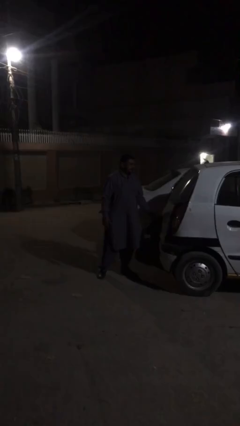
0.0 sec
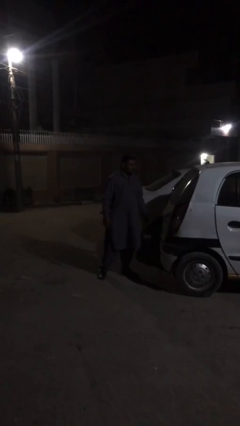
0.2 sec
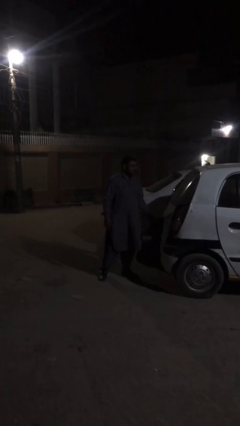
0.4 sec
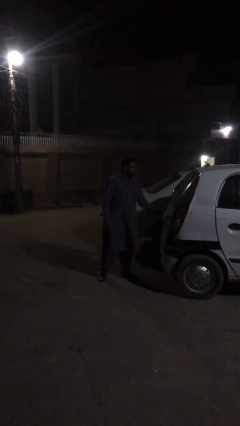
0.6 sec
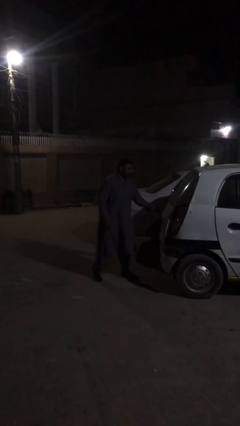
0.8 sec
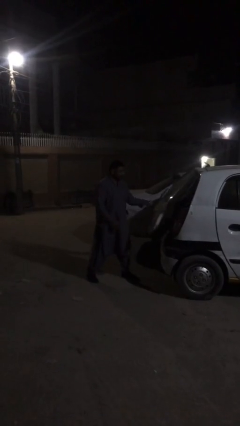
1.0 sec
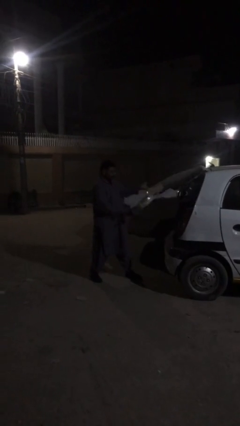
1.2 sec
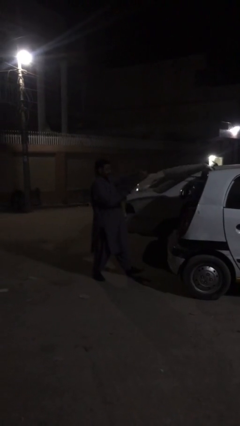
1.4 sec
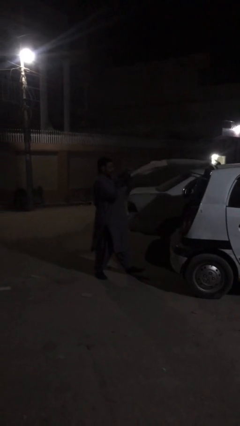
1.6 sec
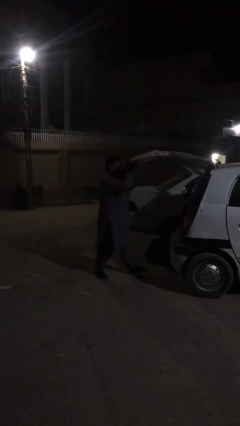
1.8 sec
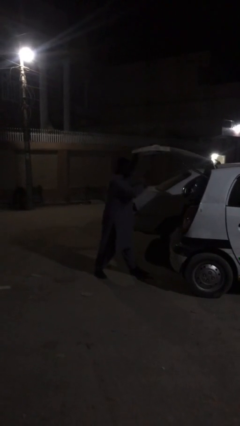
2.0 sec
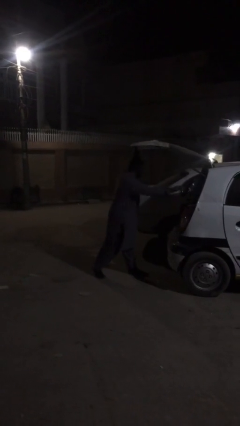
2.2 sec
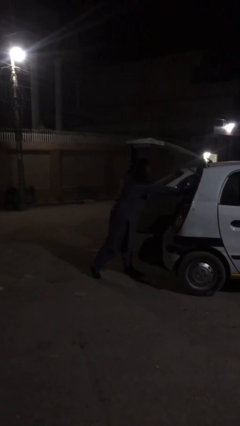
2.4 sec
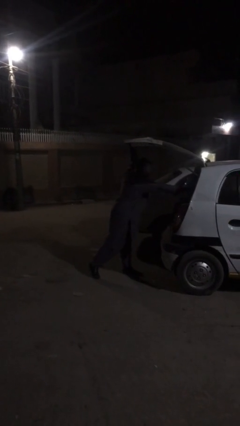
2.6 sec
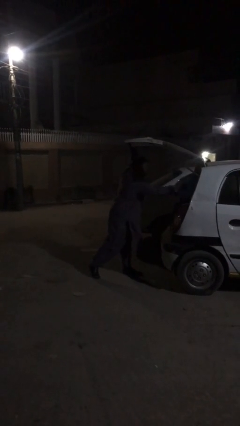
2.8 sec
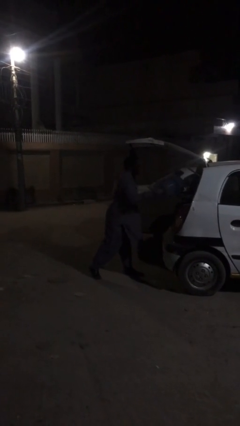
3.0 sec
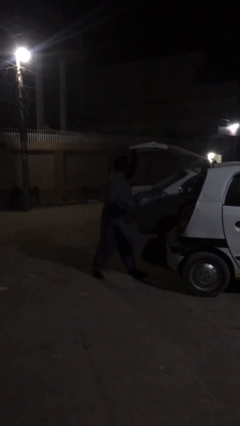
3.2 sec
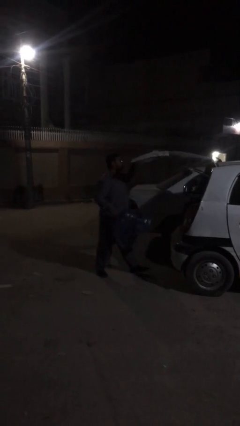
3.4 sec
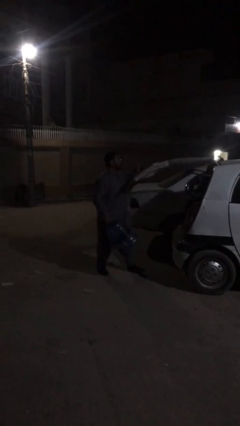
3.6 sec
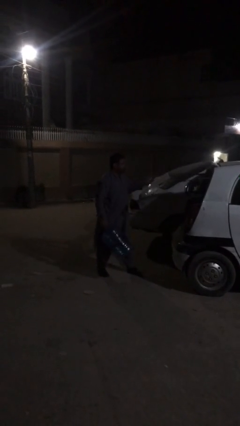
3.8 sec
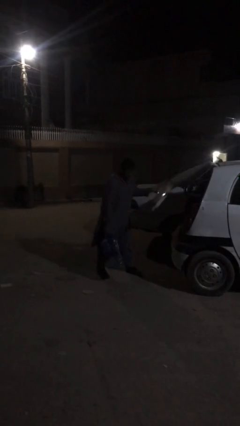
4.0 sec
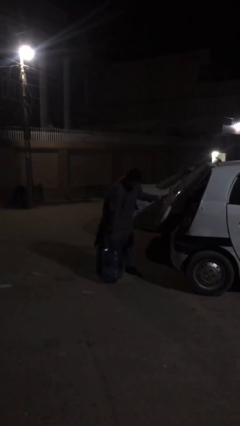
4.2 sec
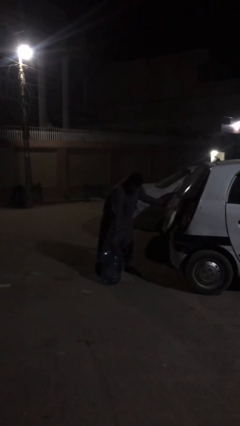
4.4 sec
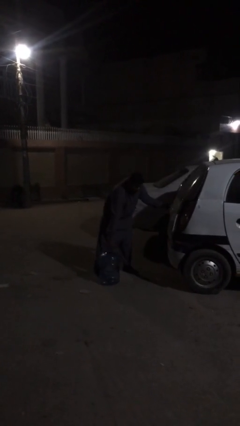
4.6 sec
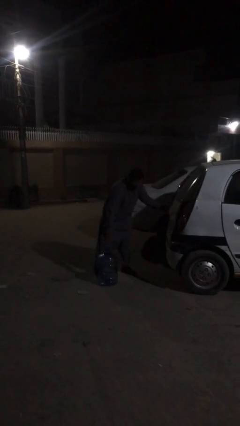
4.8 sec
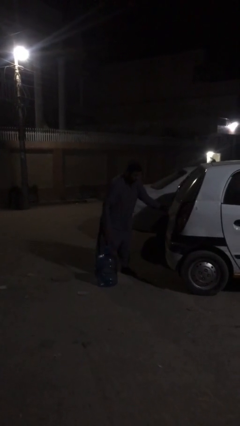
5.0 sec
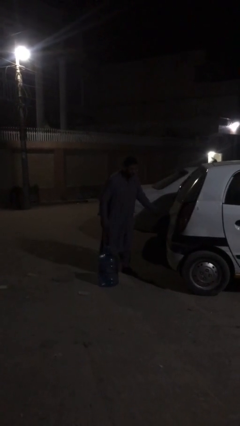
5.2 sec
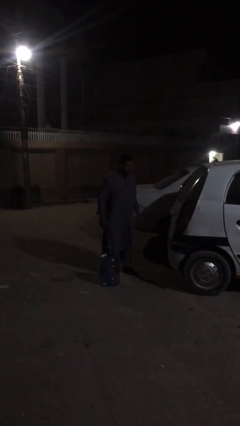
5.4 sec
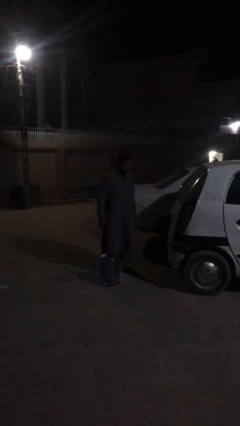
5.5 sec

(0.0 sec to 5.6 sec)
person unloads car

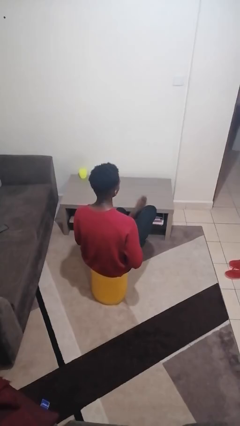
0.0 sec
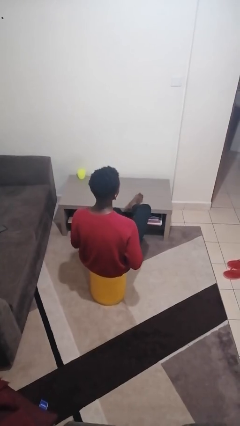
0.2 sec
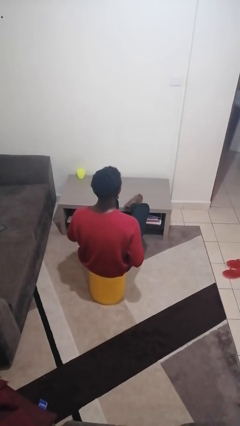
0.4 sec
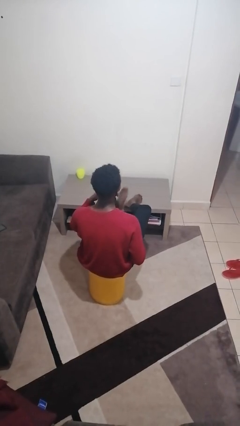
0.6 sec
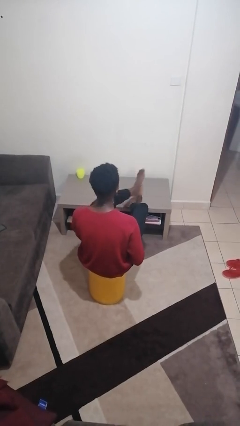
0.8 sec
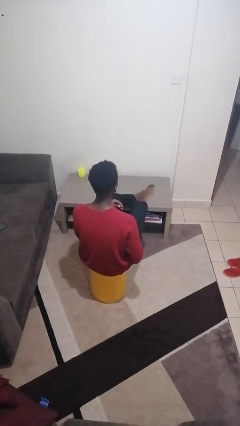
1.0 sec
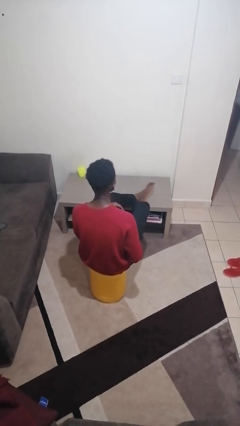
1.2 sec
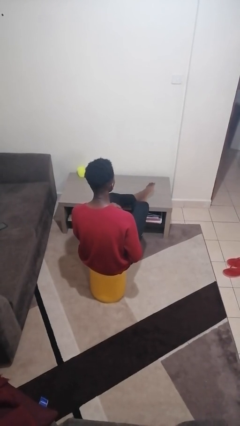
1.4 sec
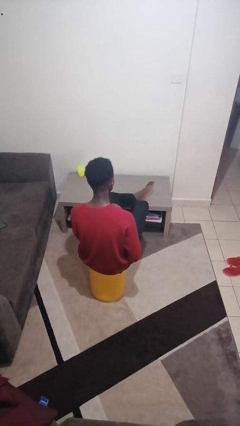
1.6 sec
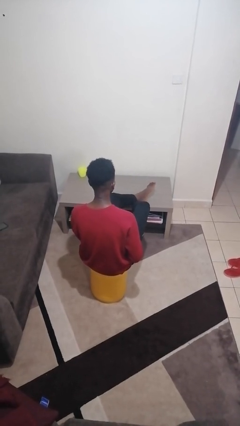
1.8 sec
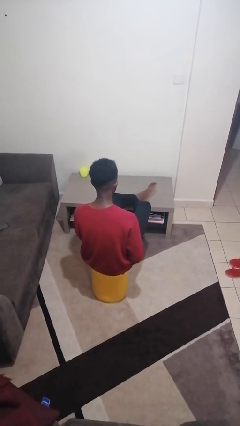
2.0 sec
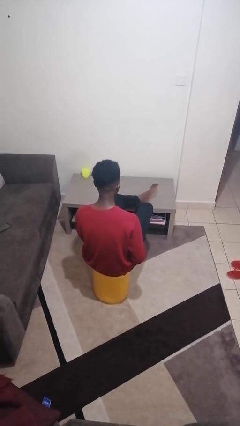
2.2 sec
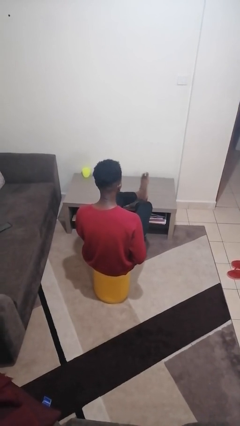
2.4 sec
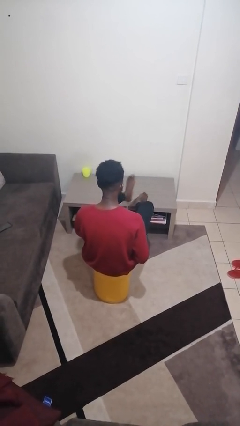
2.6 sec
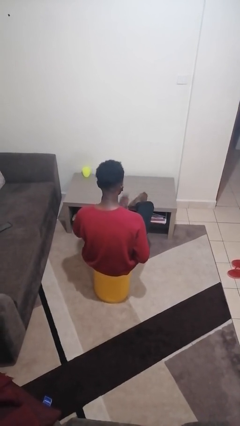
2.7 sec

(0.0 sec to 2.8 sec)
person puts feet up

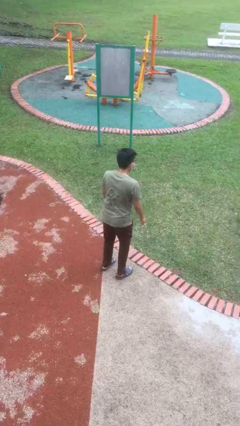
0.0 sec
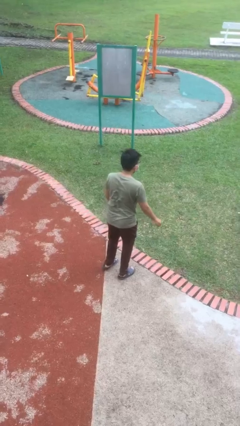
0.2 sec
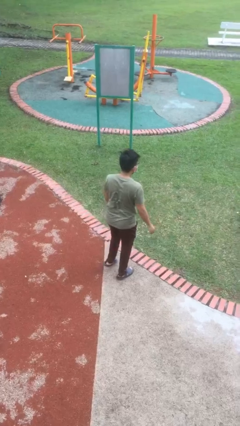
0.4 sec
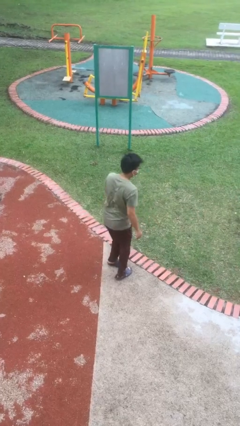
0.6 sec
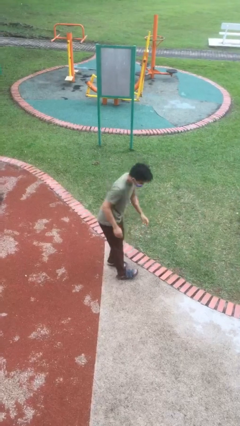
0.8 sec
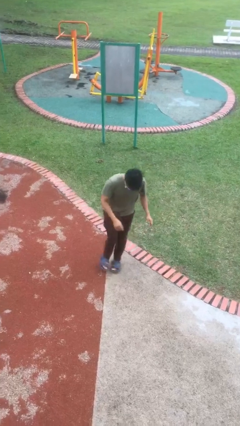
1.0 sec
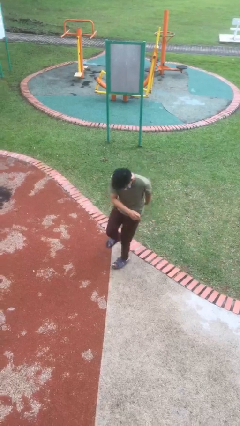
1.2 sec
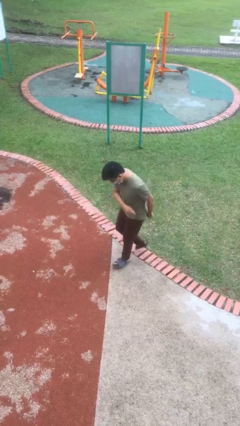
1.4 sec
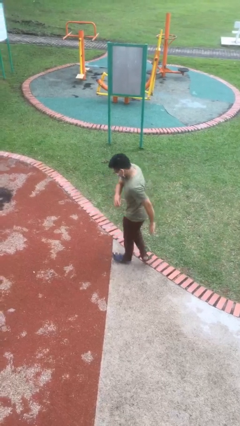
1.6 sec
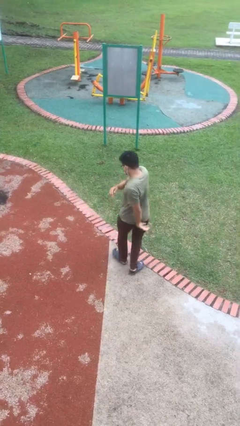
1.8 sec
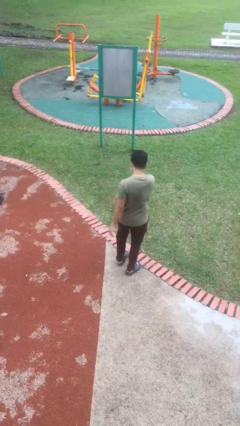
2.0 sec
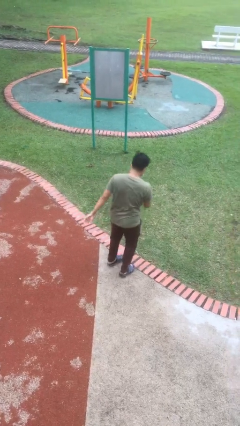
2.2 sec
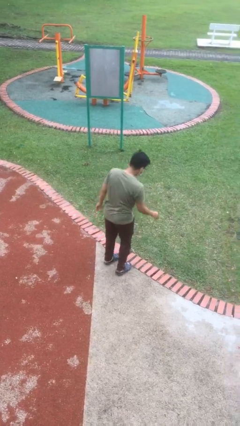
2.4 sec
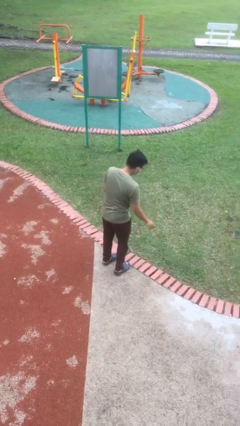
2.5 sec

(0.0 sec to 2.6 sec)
person twirls

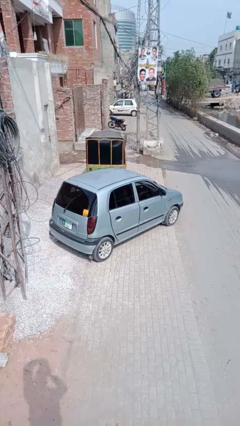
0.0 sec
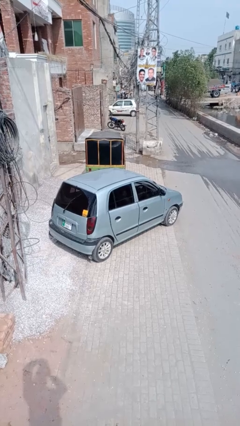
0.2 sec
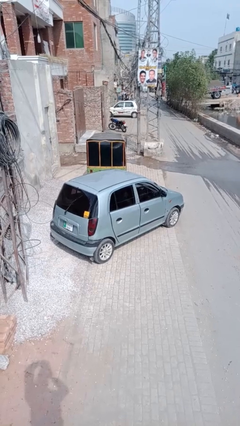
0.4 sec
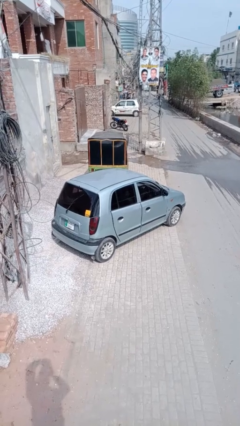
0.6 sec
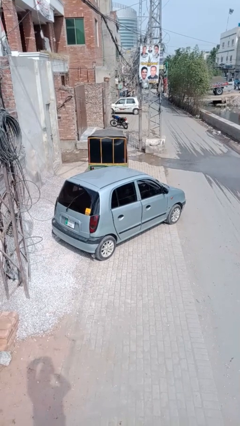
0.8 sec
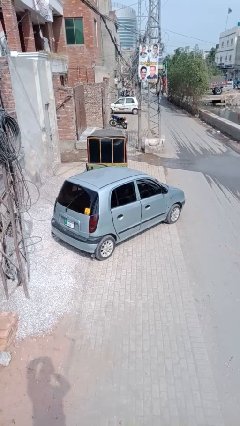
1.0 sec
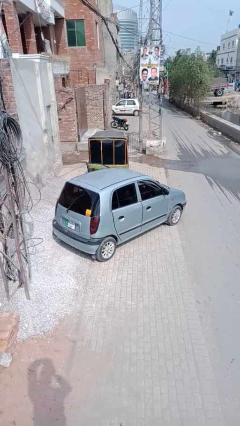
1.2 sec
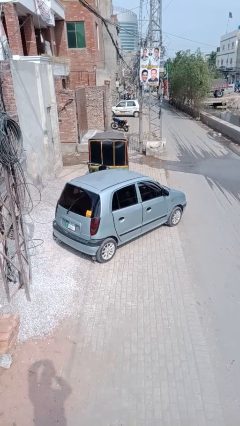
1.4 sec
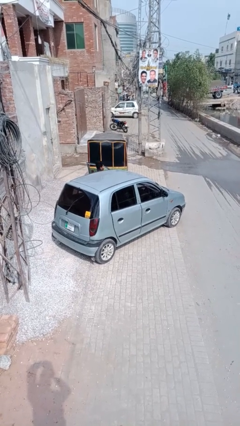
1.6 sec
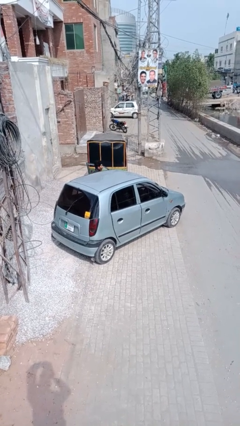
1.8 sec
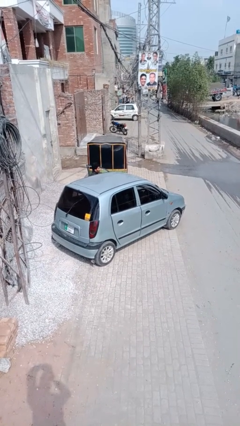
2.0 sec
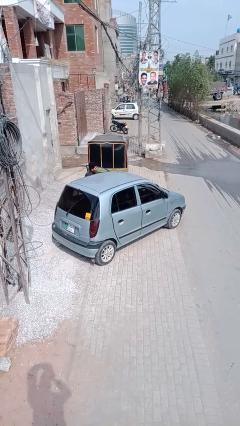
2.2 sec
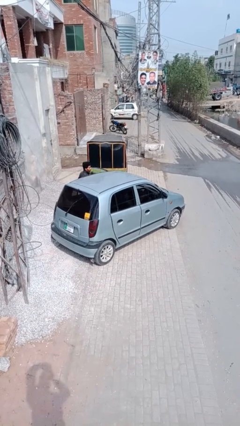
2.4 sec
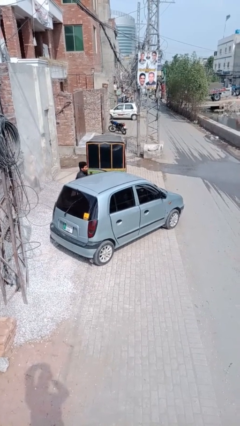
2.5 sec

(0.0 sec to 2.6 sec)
car drops off person

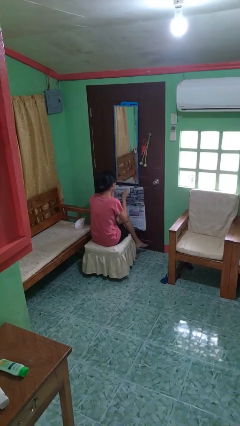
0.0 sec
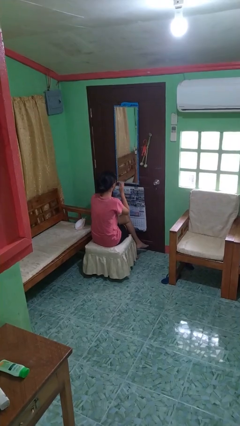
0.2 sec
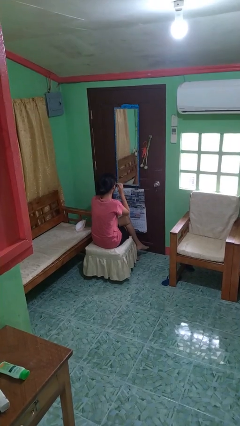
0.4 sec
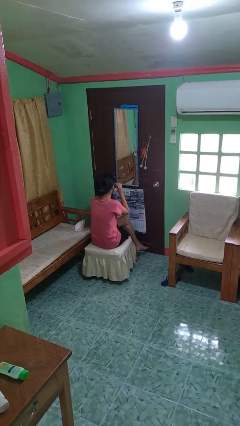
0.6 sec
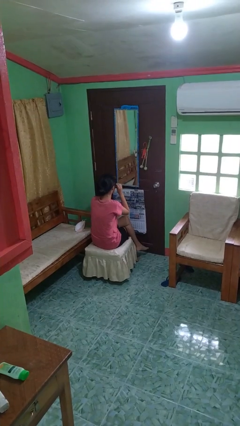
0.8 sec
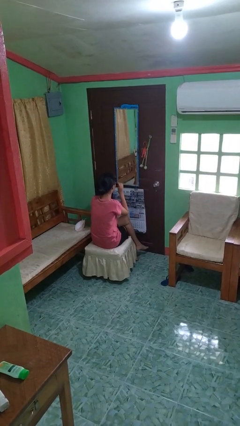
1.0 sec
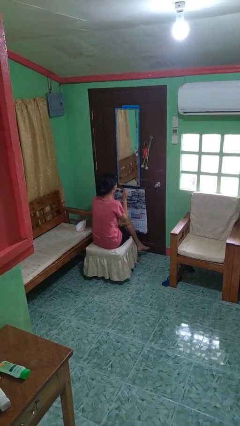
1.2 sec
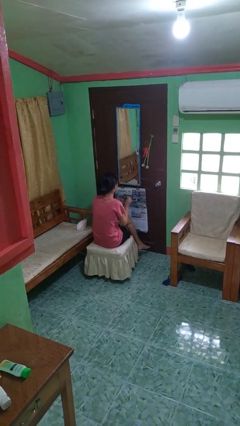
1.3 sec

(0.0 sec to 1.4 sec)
person takes off sunglasses

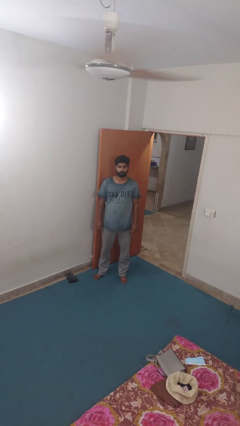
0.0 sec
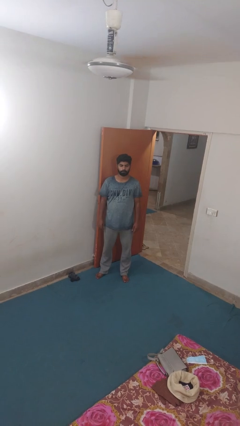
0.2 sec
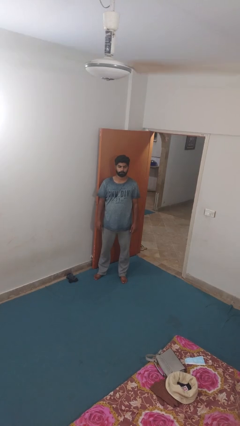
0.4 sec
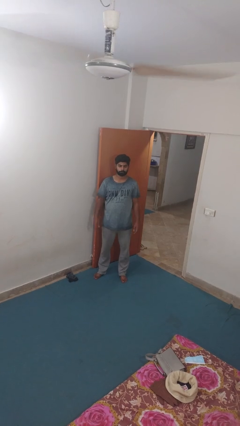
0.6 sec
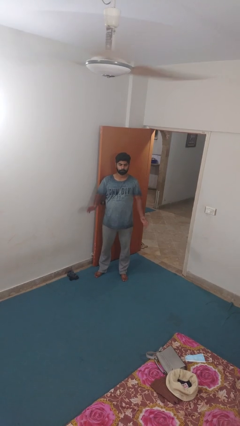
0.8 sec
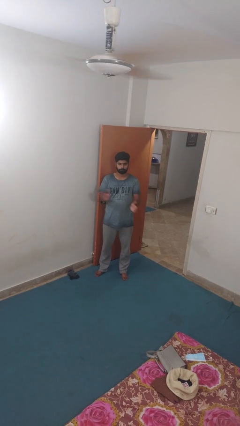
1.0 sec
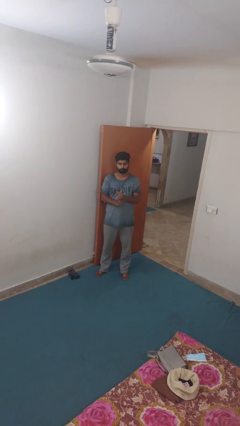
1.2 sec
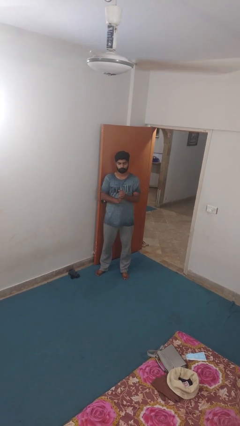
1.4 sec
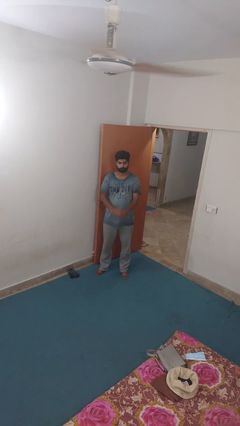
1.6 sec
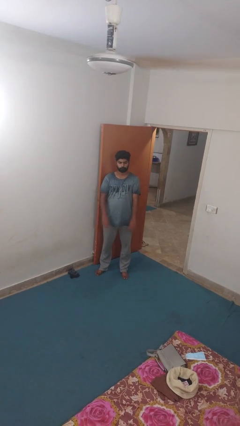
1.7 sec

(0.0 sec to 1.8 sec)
person claps hands

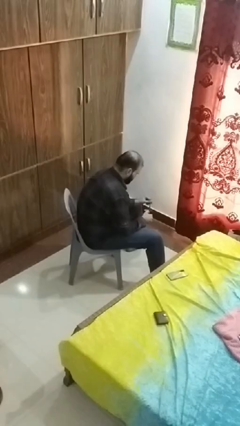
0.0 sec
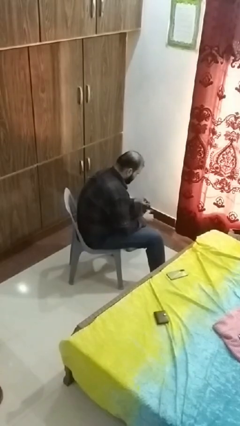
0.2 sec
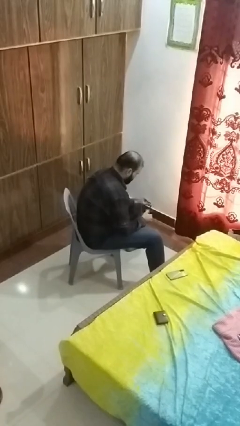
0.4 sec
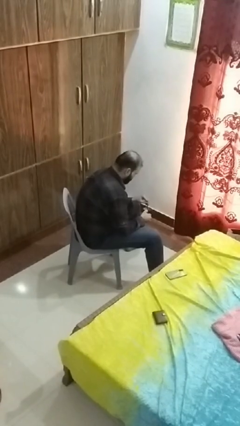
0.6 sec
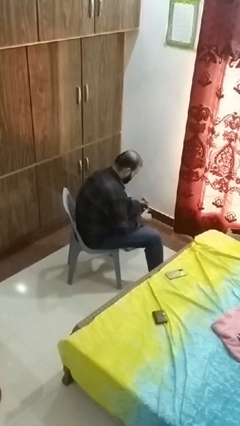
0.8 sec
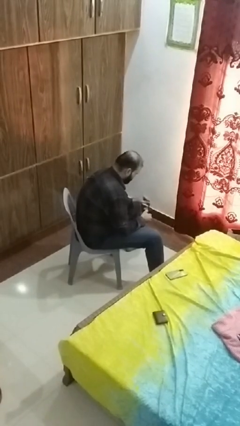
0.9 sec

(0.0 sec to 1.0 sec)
person stirs mug
